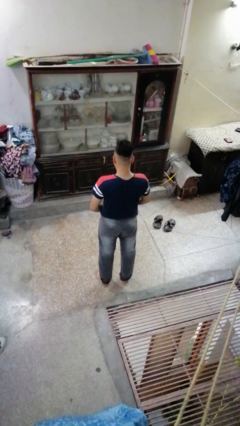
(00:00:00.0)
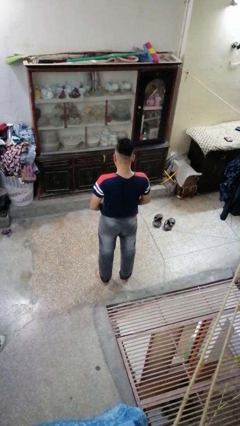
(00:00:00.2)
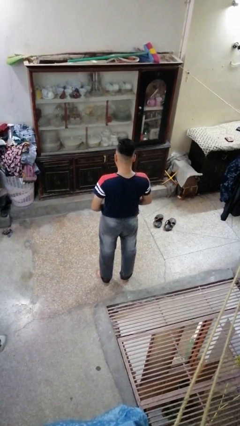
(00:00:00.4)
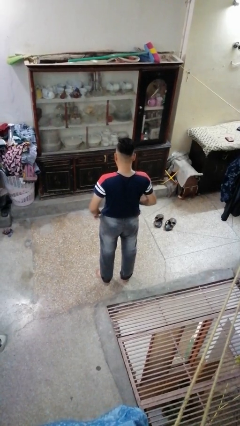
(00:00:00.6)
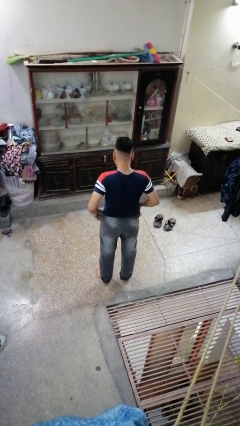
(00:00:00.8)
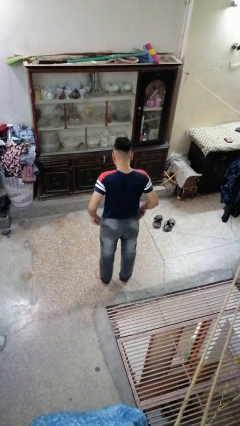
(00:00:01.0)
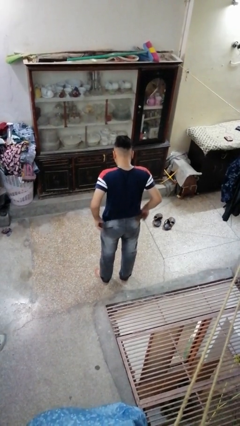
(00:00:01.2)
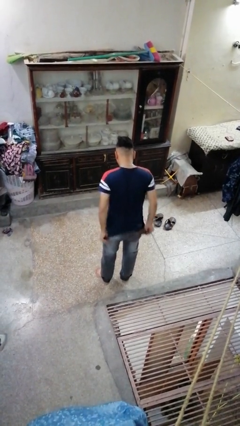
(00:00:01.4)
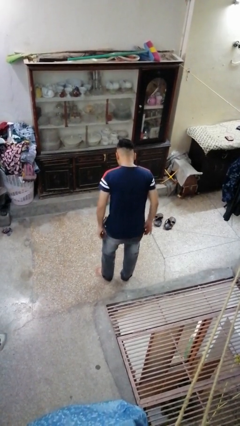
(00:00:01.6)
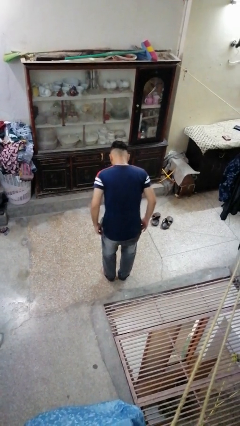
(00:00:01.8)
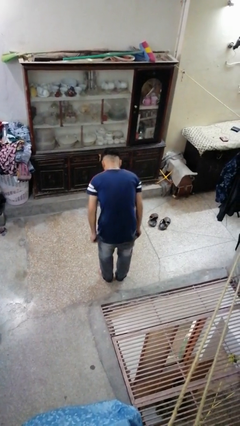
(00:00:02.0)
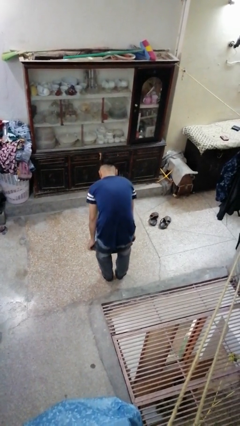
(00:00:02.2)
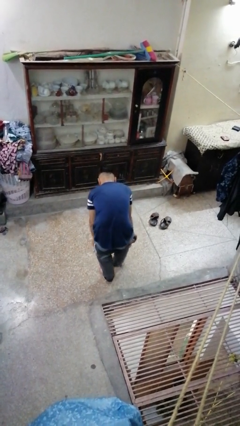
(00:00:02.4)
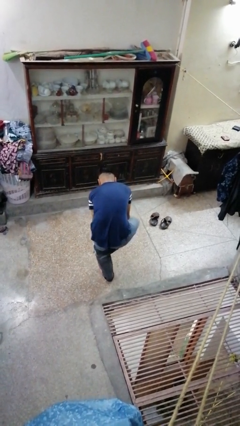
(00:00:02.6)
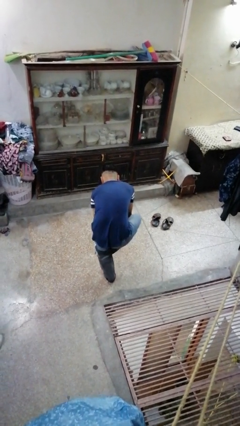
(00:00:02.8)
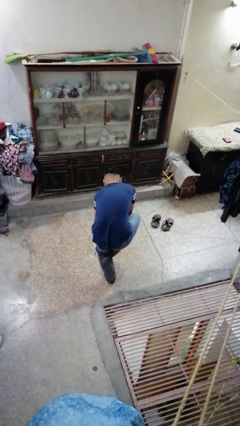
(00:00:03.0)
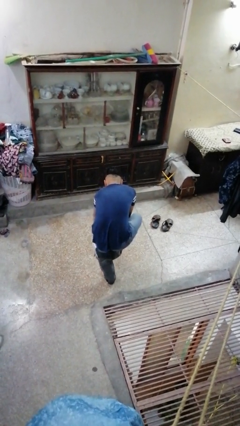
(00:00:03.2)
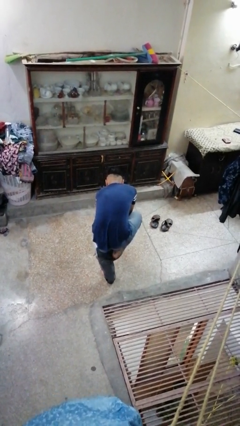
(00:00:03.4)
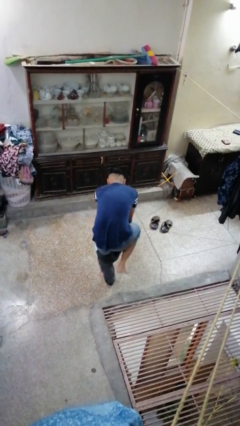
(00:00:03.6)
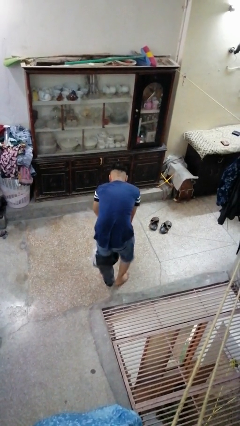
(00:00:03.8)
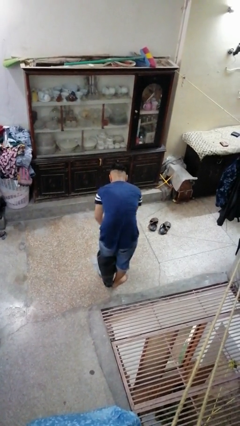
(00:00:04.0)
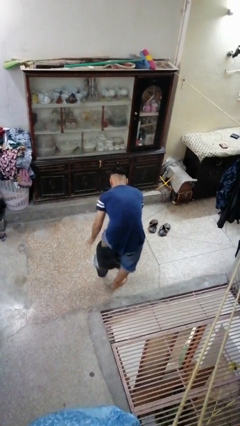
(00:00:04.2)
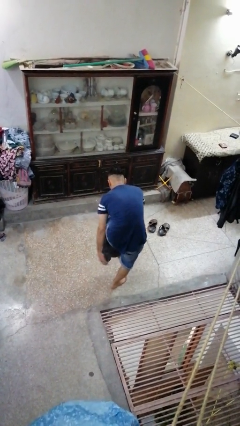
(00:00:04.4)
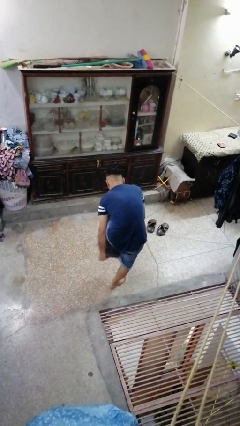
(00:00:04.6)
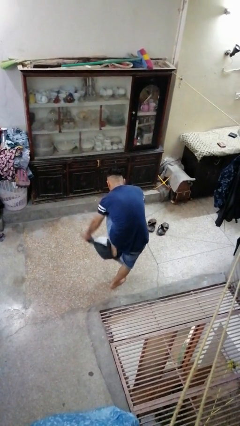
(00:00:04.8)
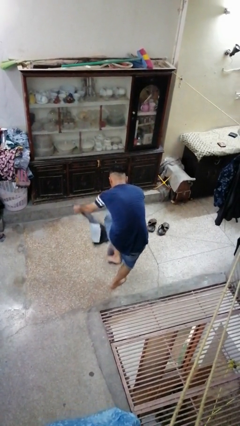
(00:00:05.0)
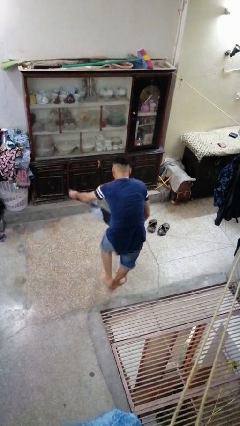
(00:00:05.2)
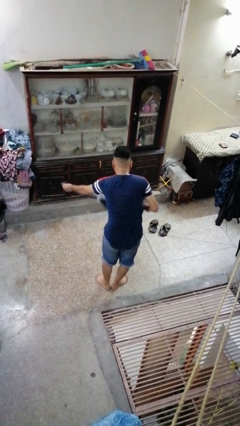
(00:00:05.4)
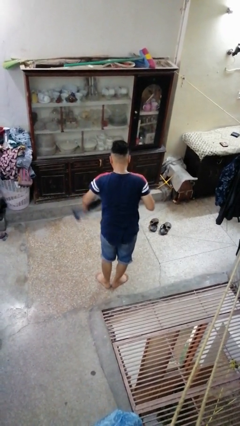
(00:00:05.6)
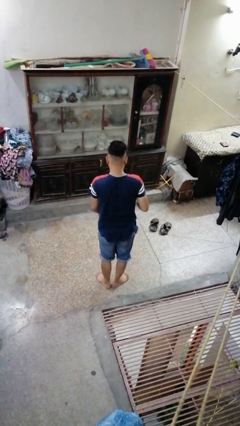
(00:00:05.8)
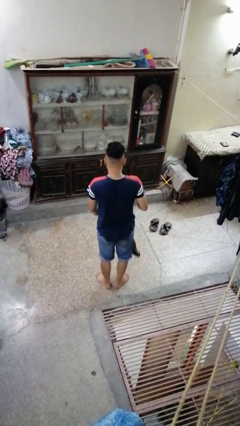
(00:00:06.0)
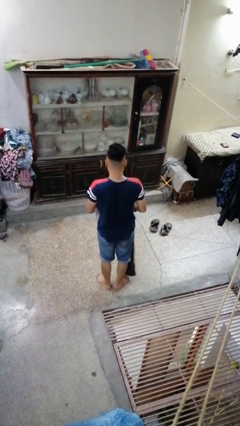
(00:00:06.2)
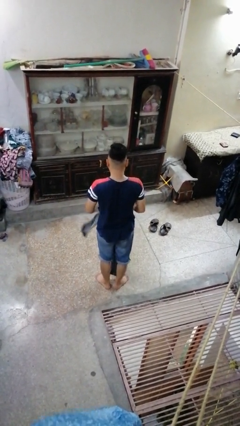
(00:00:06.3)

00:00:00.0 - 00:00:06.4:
person takes off pants

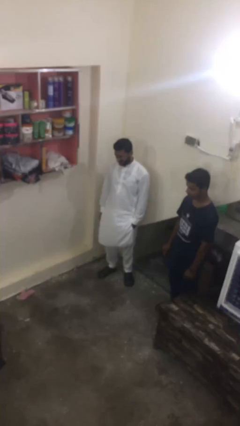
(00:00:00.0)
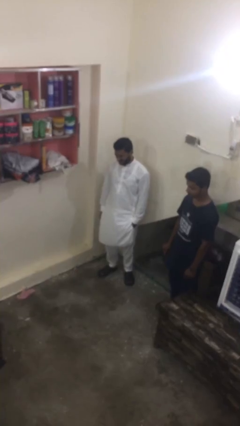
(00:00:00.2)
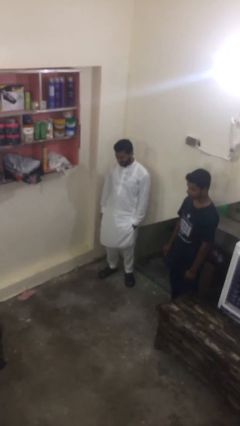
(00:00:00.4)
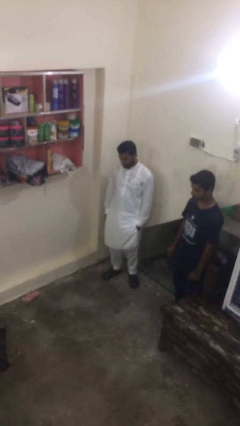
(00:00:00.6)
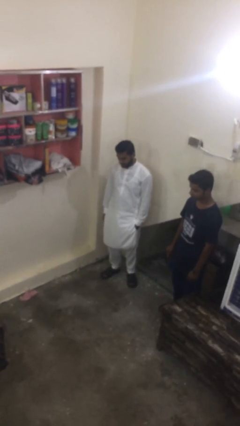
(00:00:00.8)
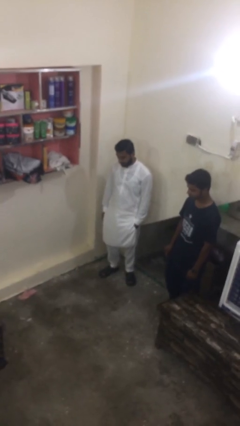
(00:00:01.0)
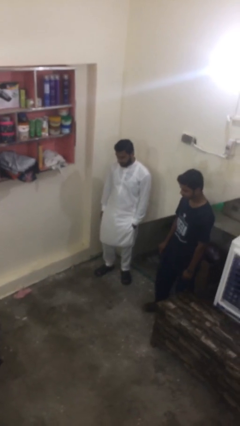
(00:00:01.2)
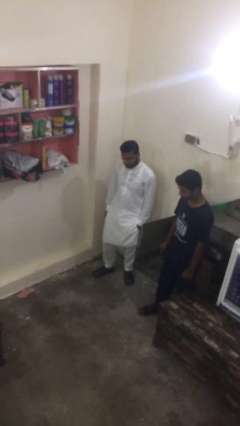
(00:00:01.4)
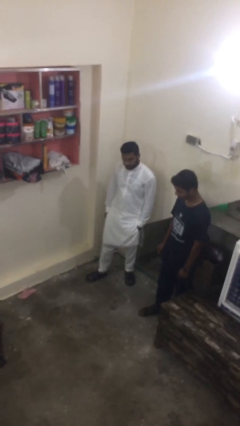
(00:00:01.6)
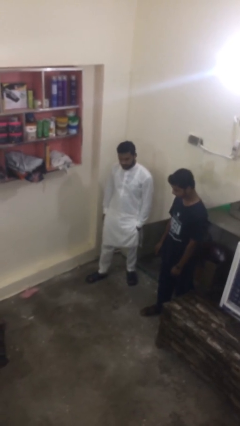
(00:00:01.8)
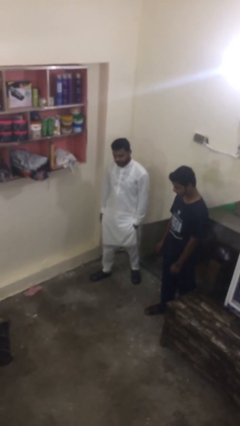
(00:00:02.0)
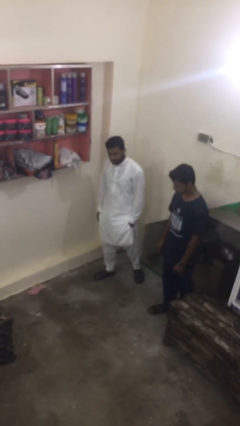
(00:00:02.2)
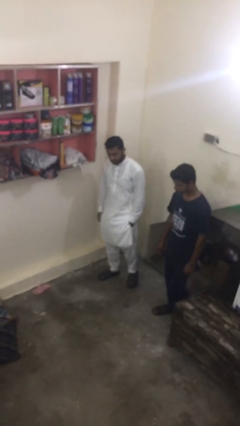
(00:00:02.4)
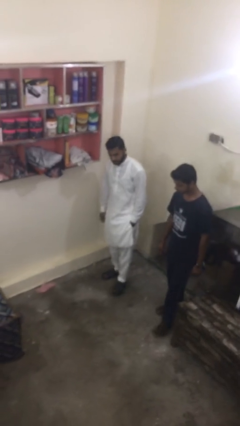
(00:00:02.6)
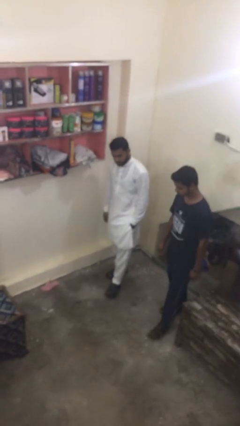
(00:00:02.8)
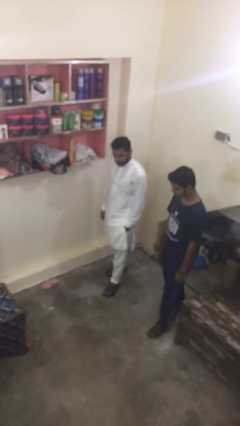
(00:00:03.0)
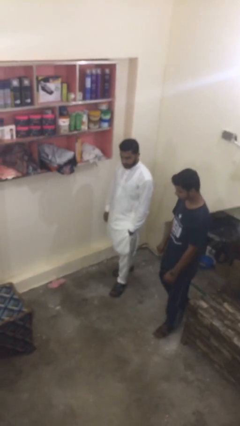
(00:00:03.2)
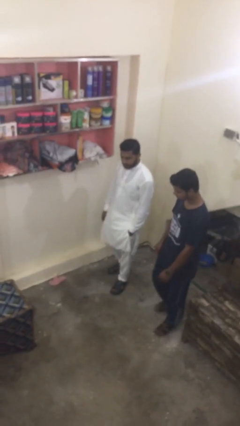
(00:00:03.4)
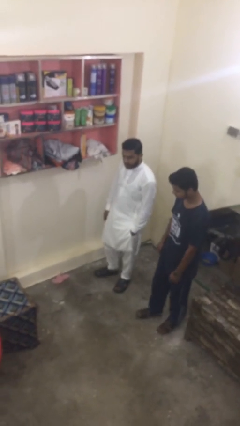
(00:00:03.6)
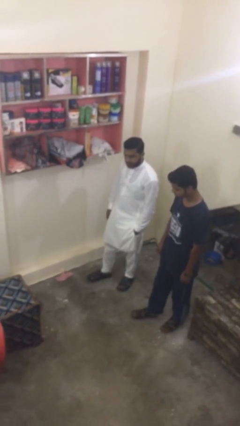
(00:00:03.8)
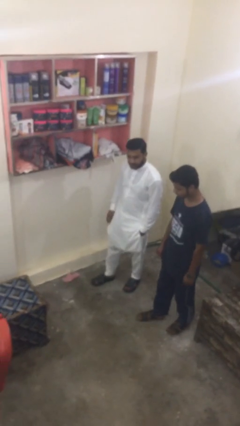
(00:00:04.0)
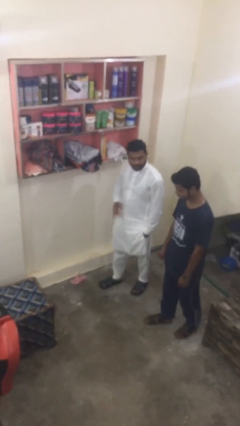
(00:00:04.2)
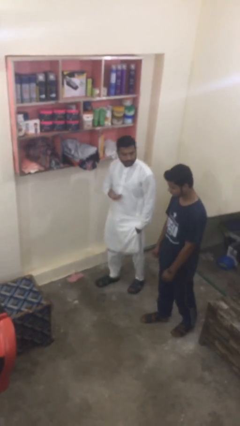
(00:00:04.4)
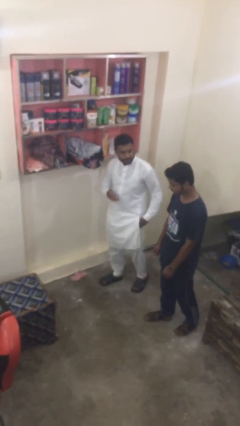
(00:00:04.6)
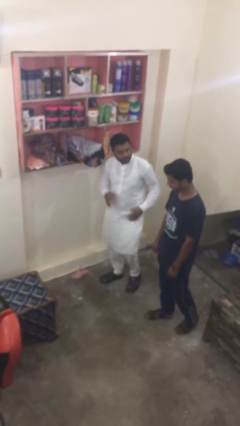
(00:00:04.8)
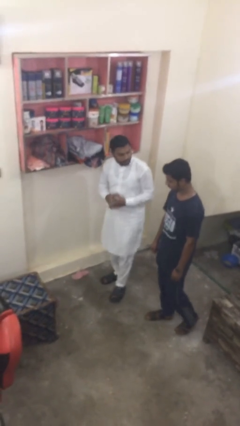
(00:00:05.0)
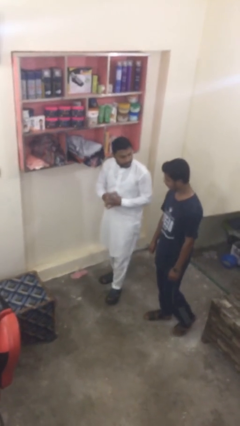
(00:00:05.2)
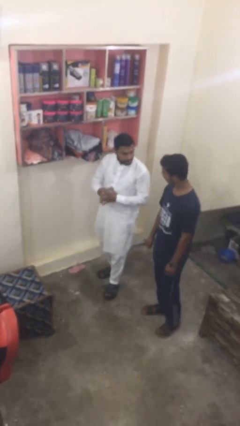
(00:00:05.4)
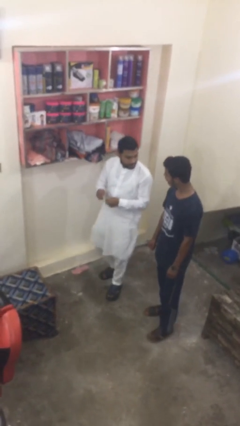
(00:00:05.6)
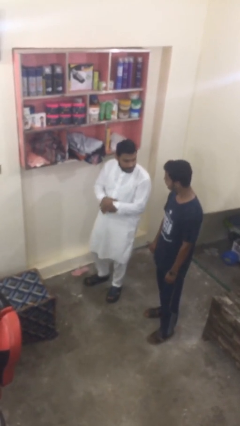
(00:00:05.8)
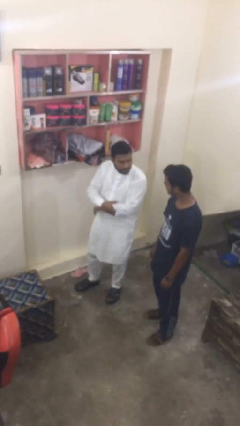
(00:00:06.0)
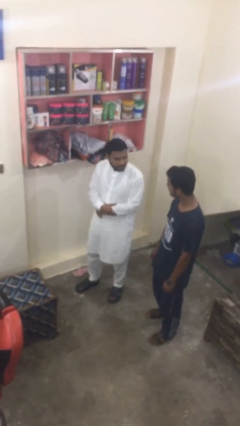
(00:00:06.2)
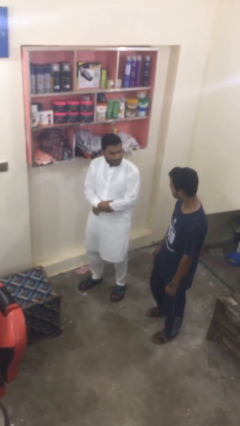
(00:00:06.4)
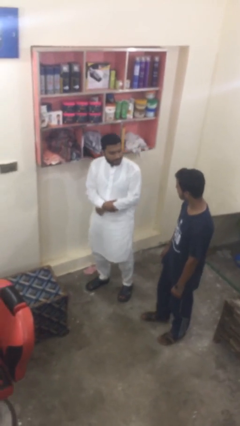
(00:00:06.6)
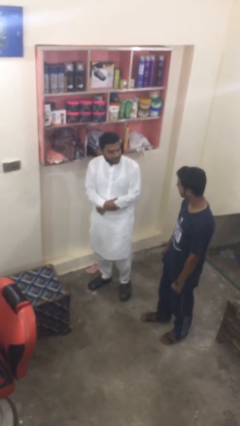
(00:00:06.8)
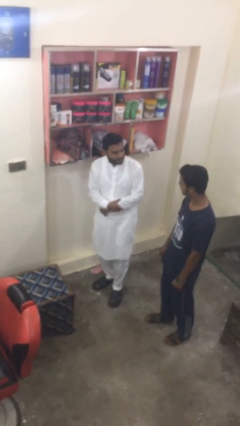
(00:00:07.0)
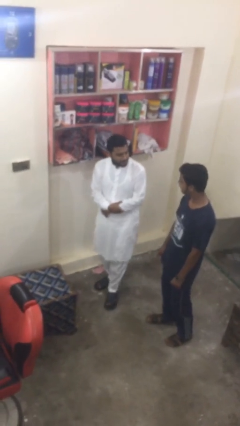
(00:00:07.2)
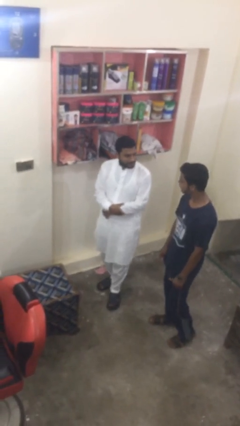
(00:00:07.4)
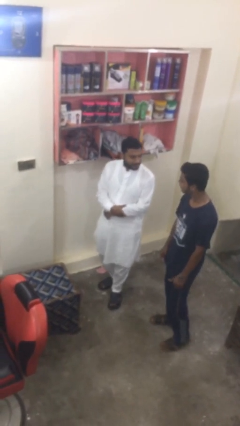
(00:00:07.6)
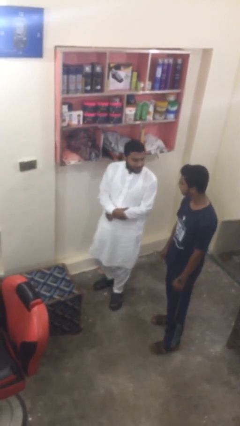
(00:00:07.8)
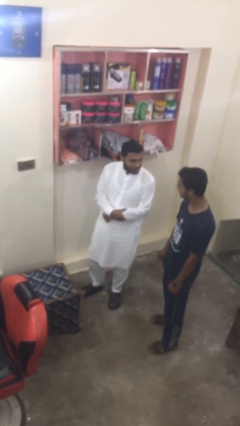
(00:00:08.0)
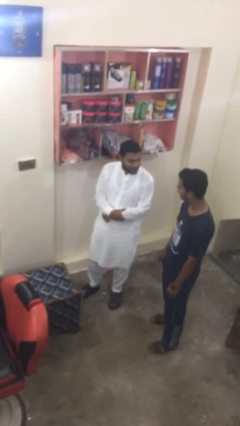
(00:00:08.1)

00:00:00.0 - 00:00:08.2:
person talks to person

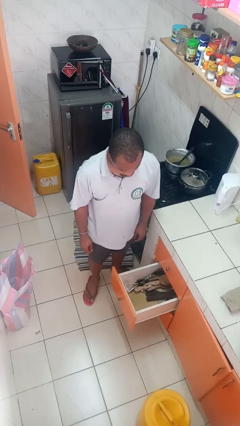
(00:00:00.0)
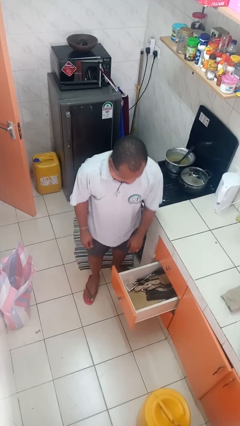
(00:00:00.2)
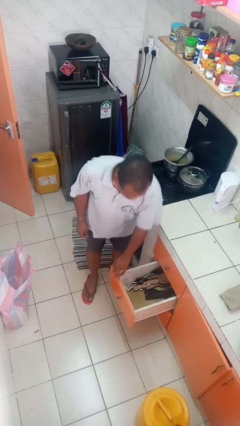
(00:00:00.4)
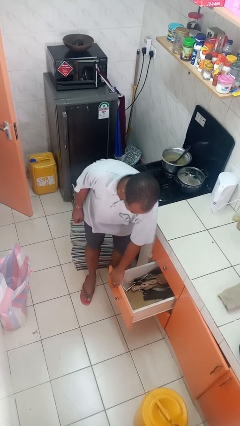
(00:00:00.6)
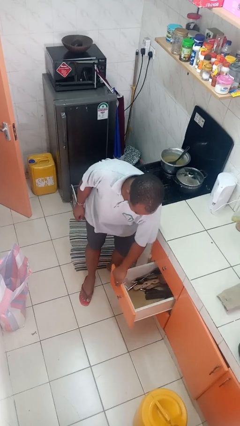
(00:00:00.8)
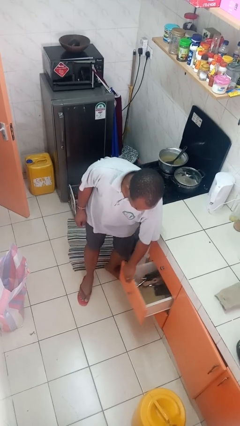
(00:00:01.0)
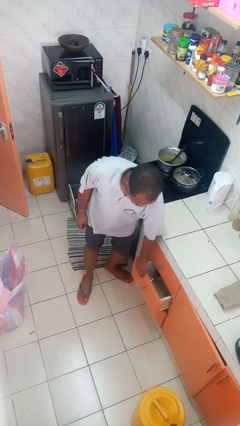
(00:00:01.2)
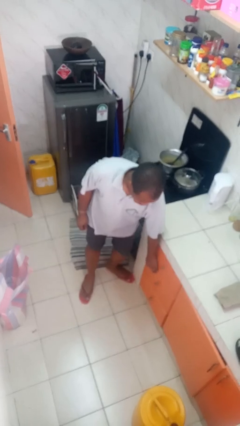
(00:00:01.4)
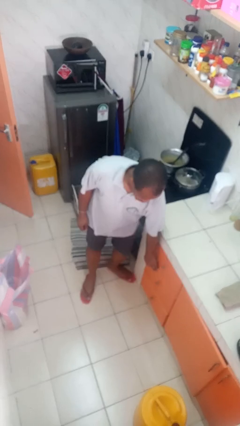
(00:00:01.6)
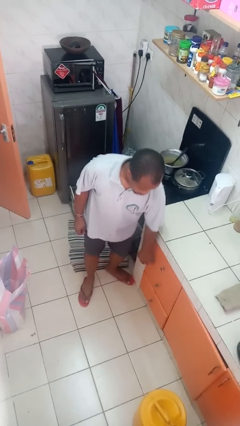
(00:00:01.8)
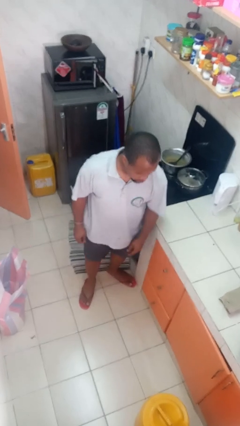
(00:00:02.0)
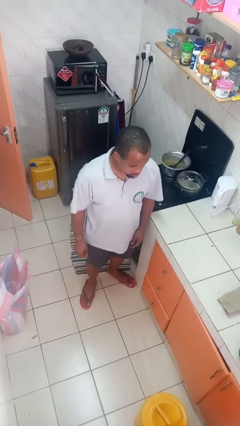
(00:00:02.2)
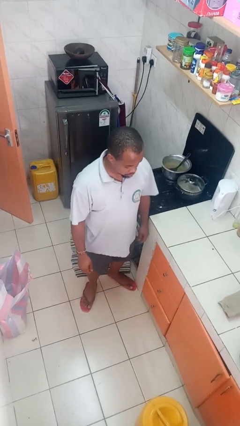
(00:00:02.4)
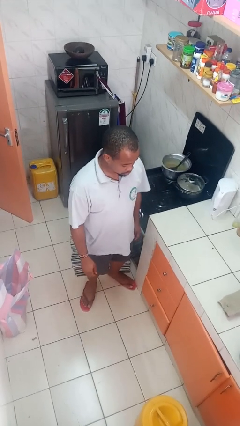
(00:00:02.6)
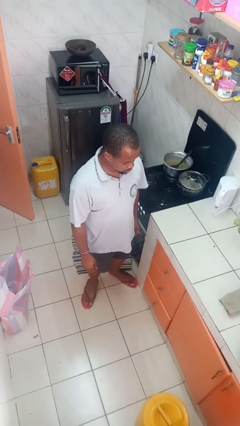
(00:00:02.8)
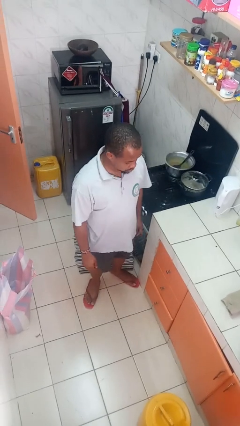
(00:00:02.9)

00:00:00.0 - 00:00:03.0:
person closes kitchen drawer
